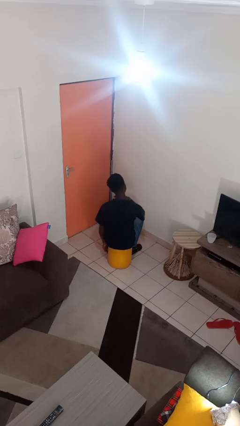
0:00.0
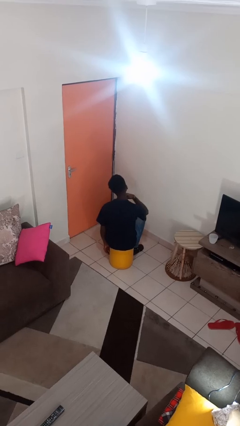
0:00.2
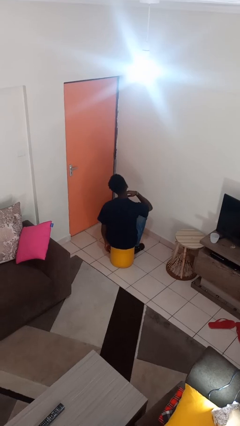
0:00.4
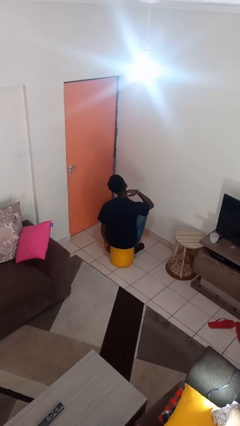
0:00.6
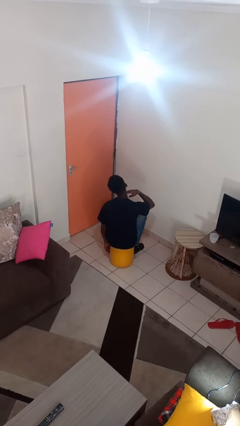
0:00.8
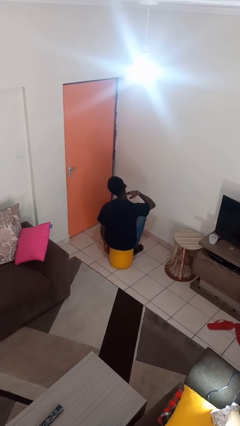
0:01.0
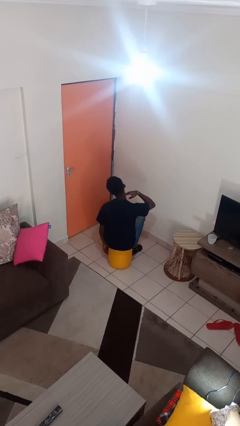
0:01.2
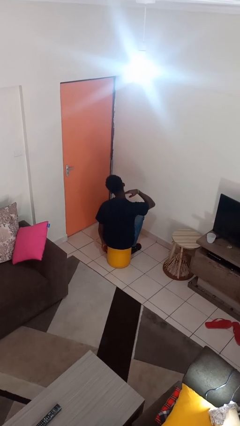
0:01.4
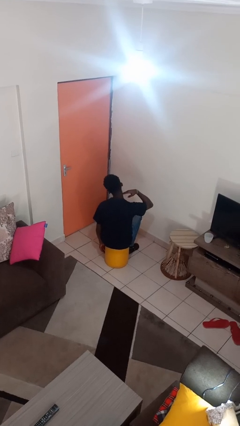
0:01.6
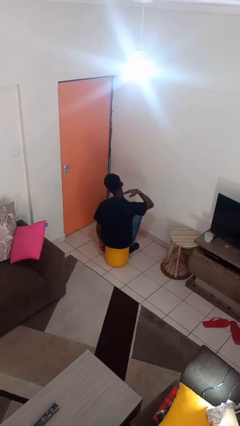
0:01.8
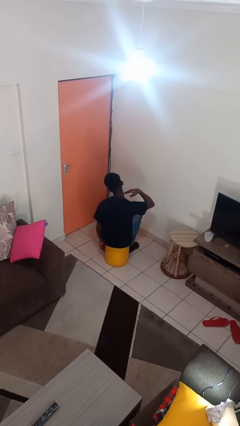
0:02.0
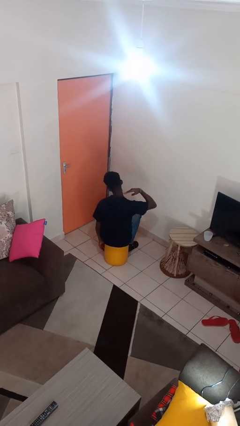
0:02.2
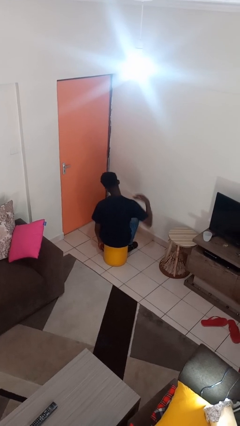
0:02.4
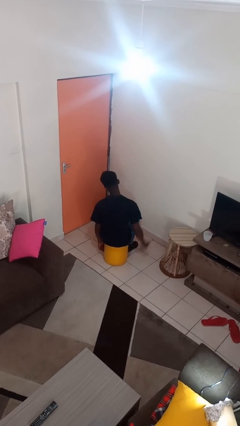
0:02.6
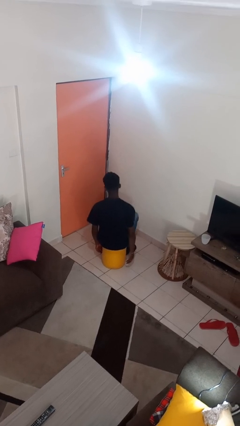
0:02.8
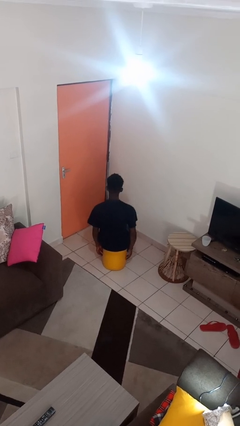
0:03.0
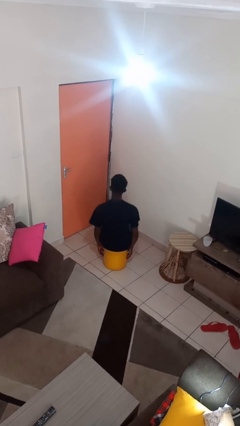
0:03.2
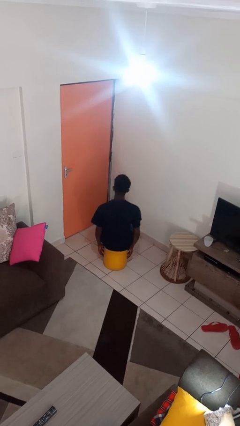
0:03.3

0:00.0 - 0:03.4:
person gestures cut

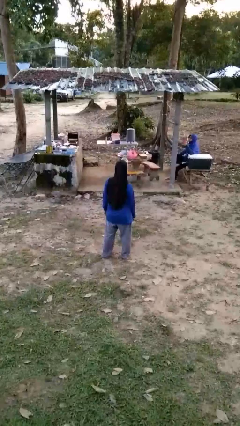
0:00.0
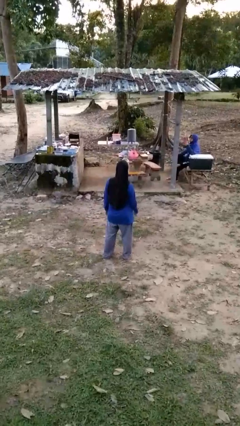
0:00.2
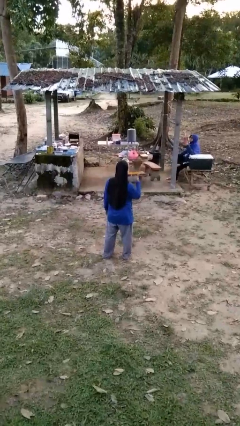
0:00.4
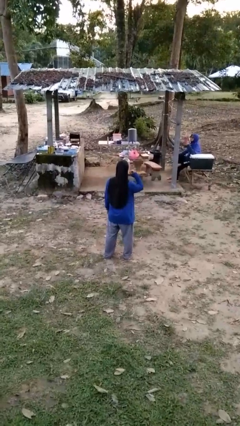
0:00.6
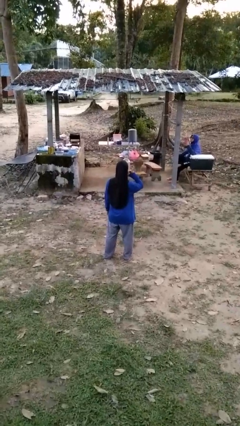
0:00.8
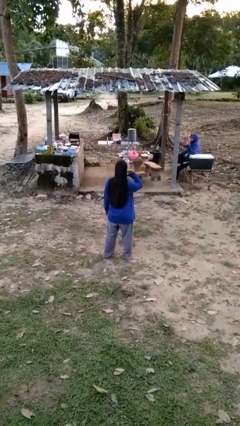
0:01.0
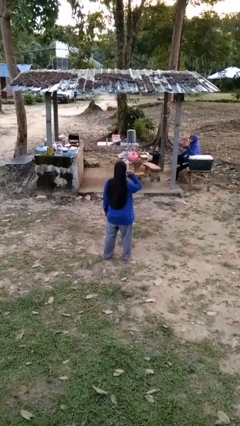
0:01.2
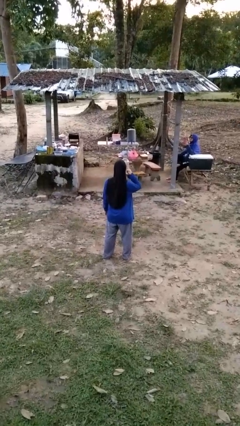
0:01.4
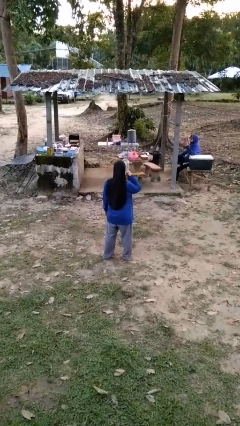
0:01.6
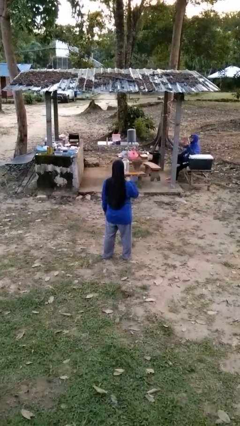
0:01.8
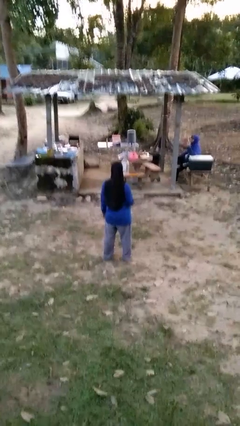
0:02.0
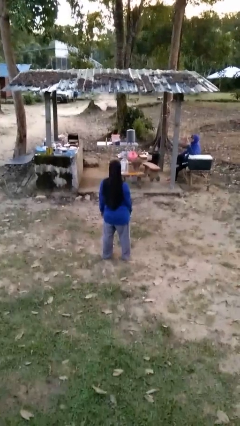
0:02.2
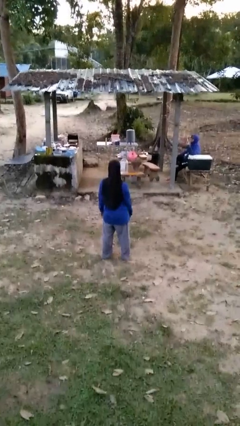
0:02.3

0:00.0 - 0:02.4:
person gestures call me

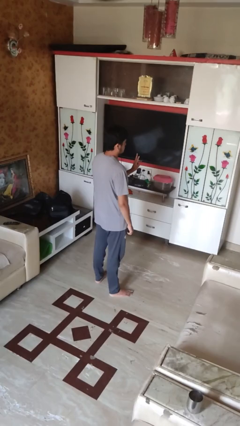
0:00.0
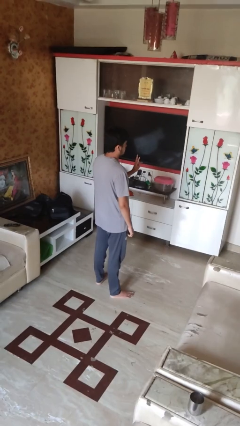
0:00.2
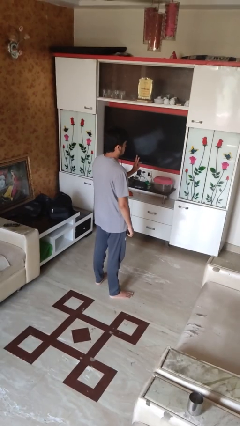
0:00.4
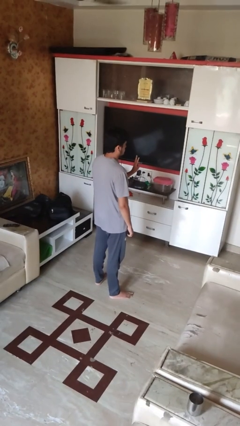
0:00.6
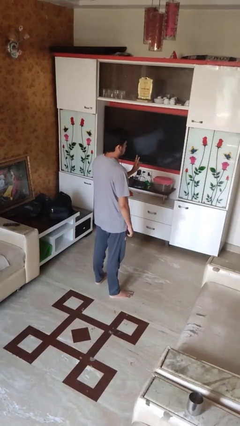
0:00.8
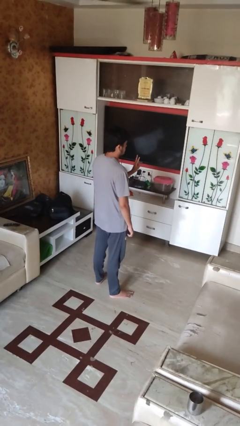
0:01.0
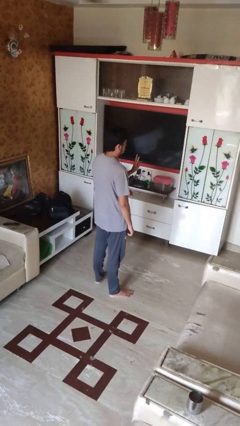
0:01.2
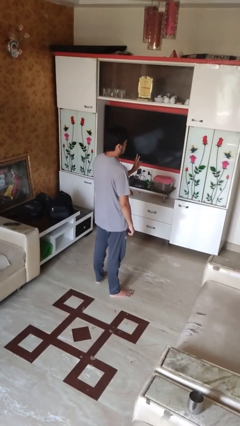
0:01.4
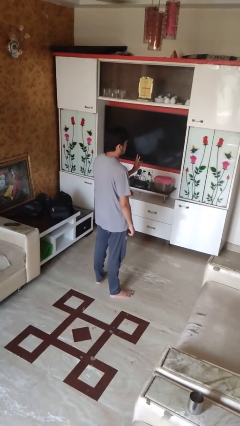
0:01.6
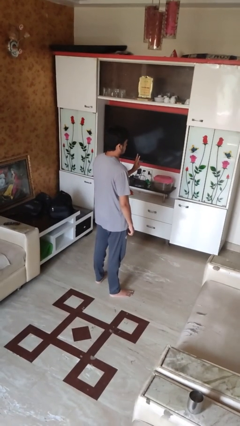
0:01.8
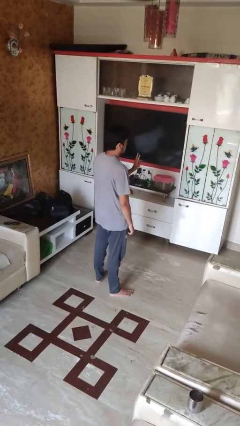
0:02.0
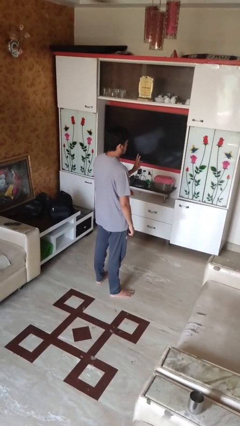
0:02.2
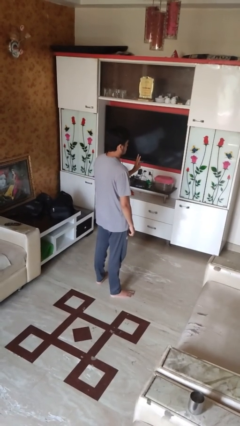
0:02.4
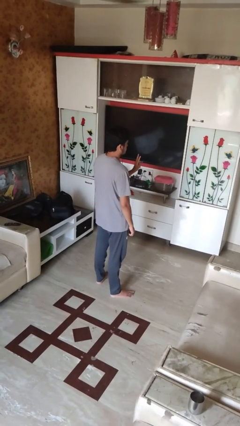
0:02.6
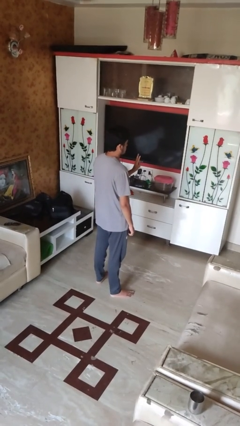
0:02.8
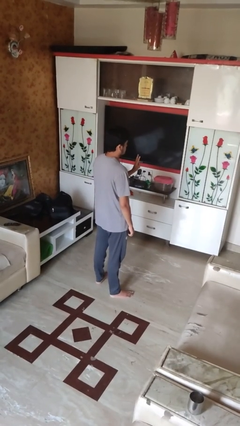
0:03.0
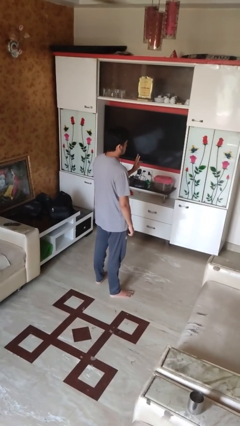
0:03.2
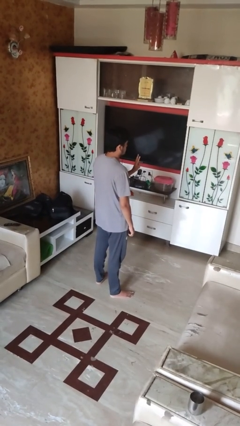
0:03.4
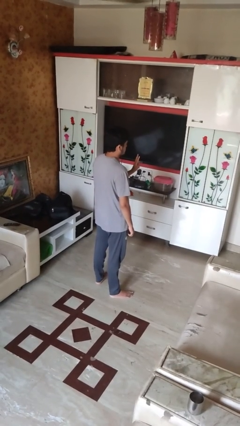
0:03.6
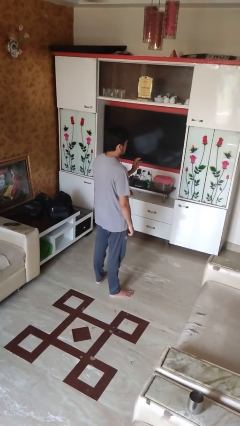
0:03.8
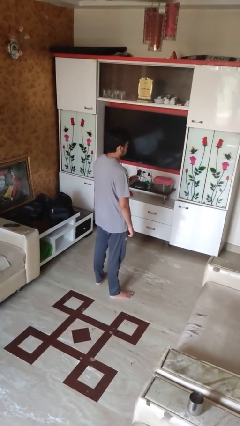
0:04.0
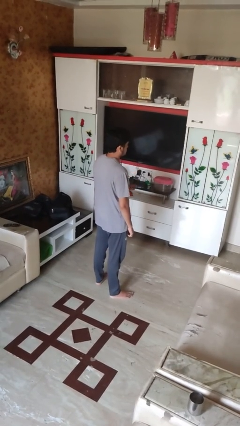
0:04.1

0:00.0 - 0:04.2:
person gestures peace

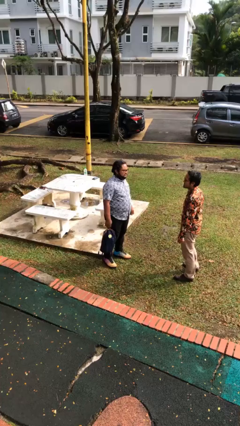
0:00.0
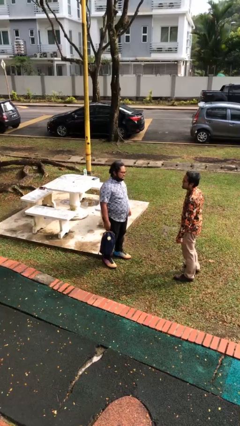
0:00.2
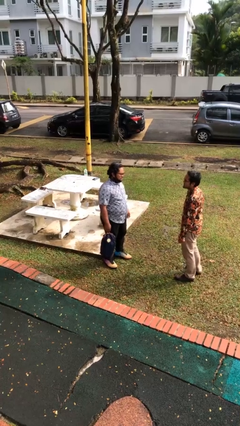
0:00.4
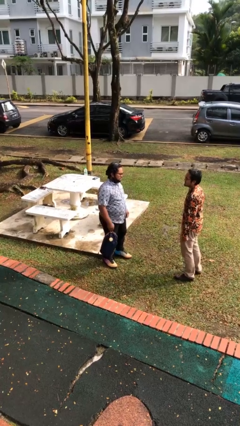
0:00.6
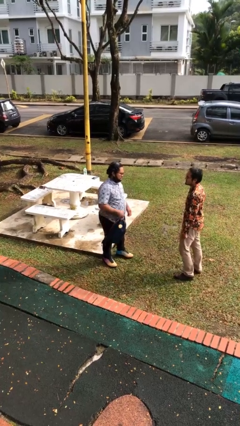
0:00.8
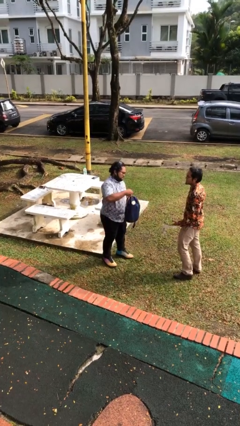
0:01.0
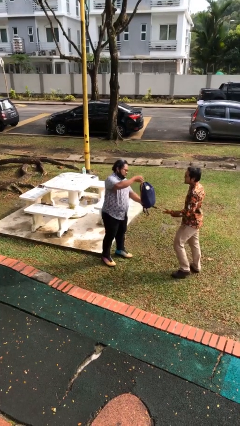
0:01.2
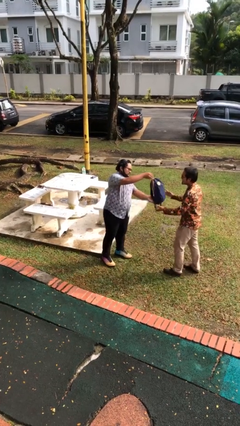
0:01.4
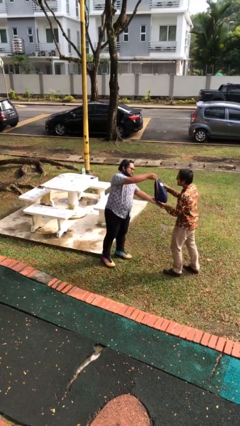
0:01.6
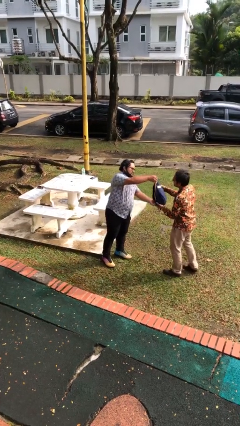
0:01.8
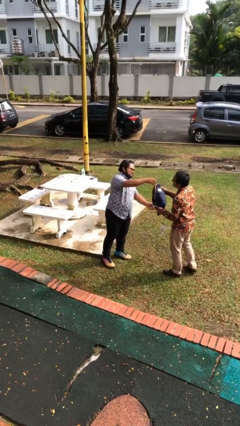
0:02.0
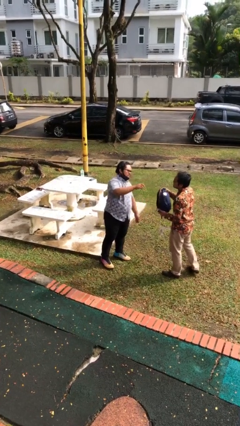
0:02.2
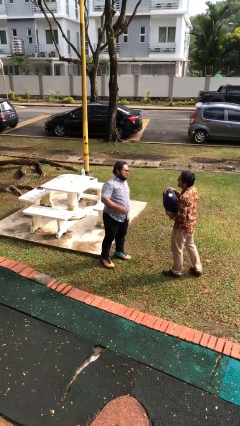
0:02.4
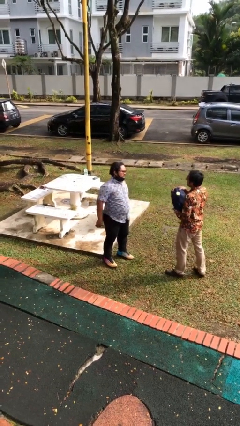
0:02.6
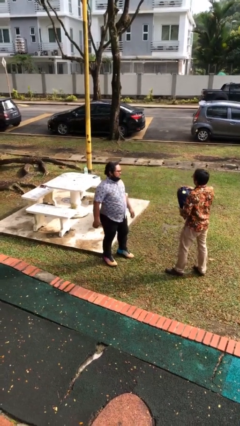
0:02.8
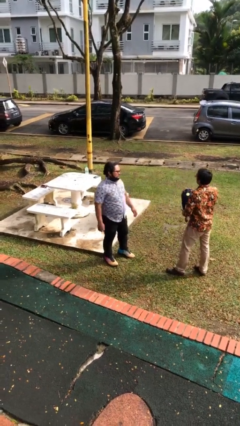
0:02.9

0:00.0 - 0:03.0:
person transfers object to person

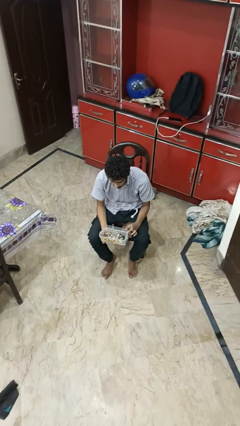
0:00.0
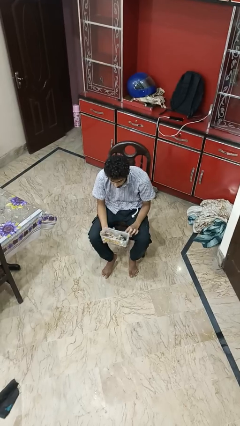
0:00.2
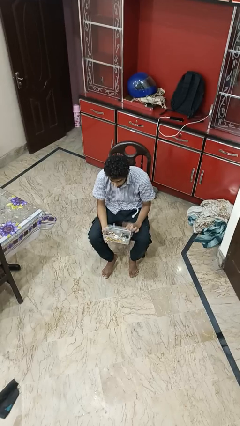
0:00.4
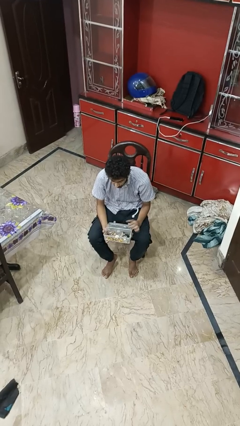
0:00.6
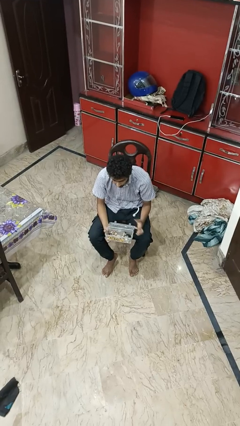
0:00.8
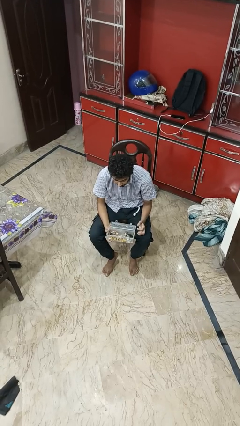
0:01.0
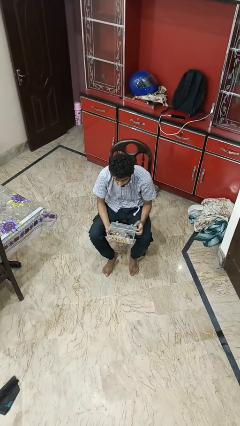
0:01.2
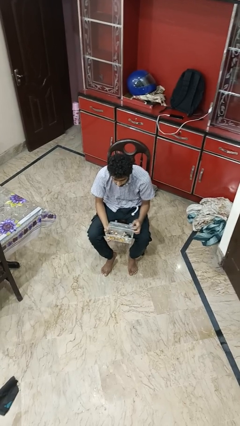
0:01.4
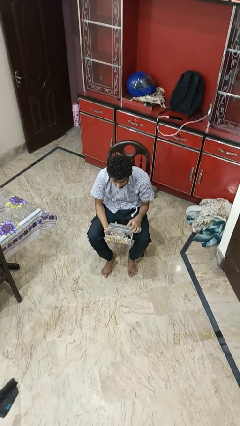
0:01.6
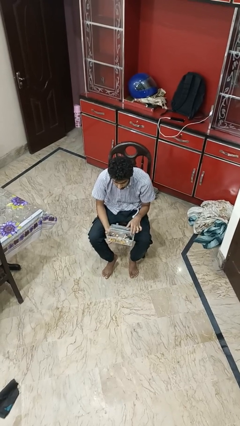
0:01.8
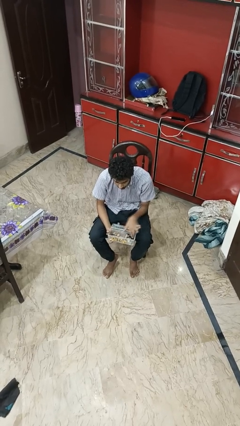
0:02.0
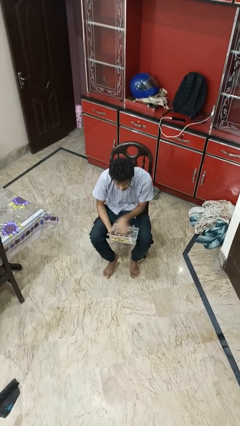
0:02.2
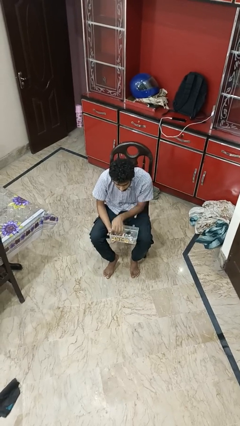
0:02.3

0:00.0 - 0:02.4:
person opens jewelry box

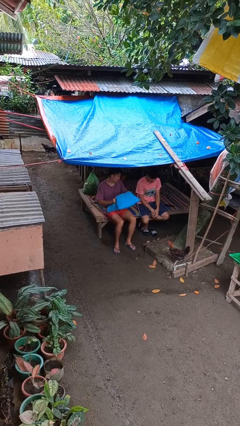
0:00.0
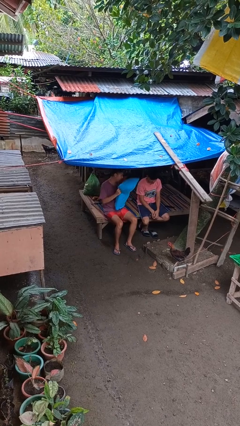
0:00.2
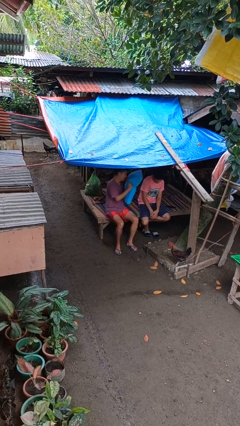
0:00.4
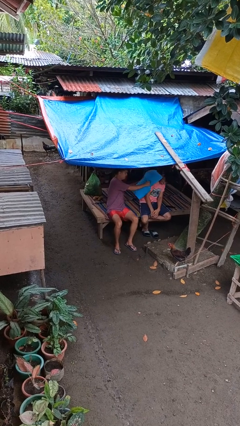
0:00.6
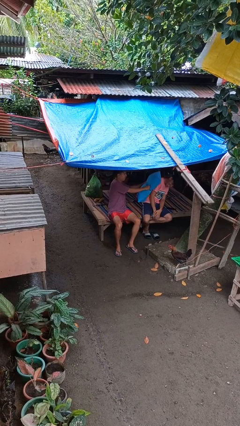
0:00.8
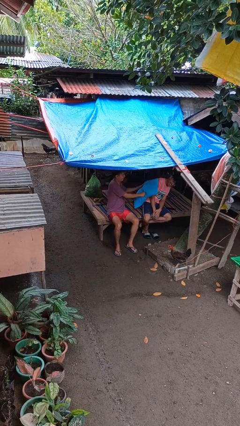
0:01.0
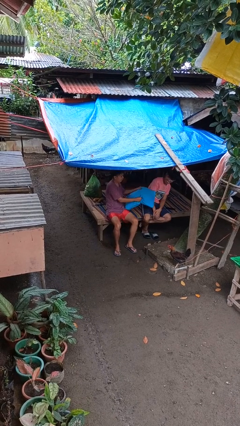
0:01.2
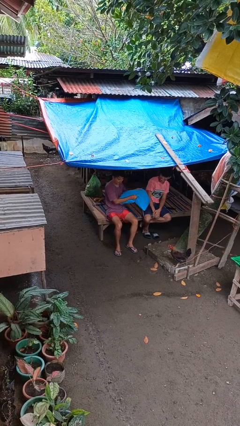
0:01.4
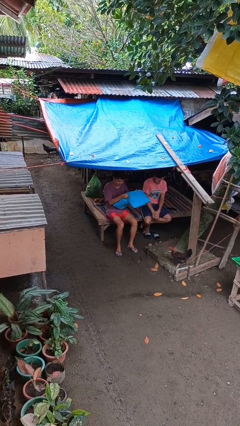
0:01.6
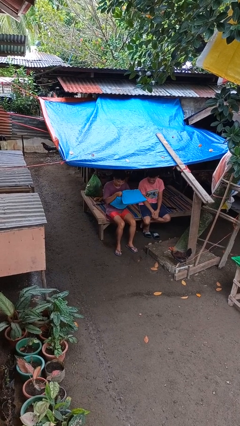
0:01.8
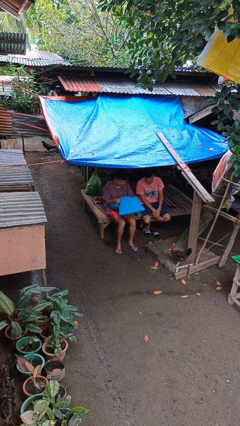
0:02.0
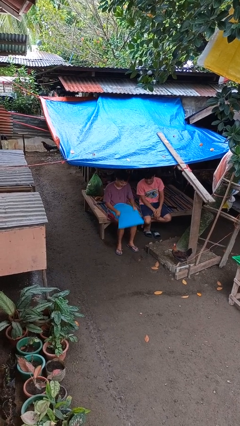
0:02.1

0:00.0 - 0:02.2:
person hits person with pillow
